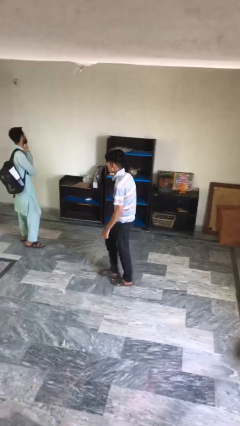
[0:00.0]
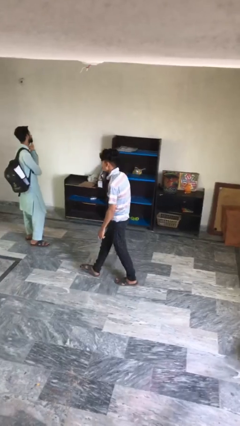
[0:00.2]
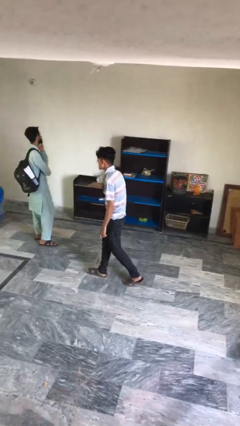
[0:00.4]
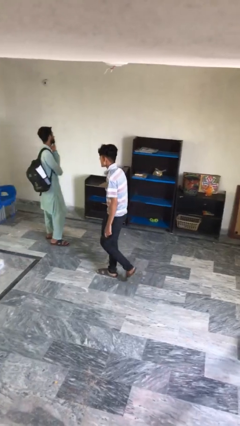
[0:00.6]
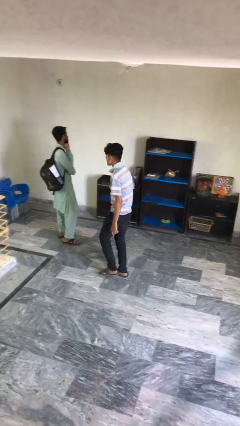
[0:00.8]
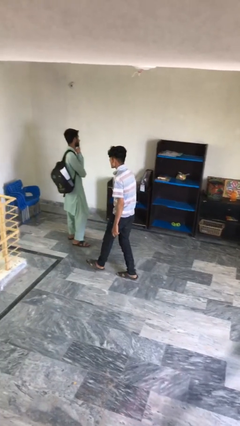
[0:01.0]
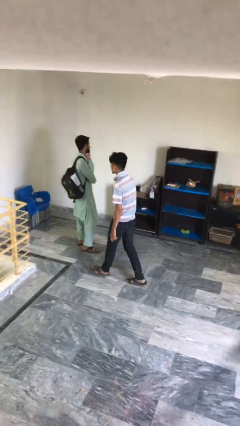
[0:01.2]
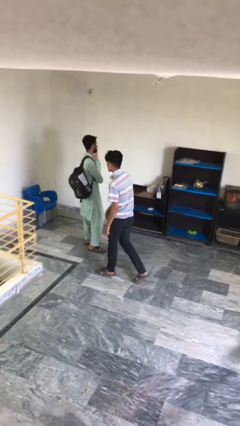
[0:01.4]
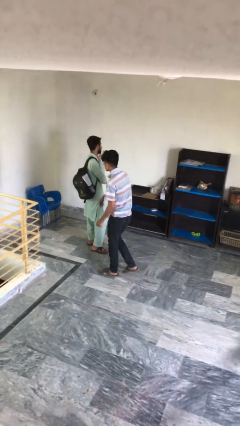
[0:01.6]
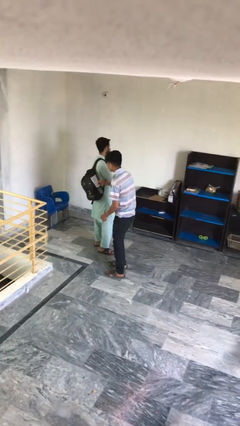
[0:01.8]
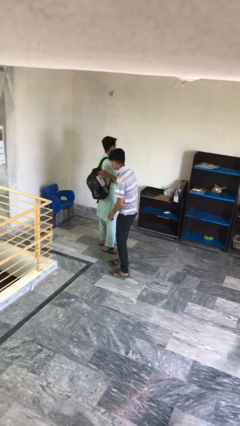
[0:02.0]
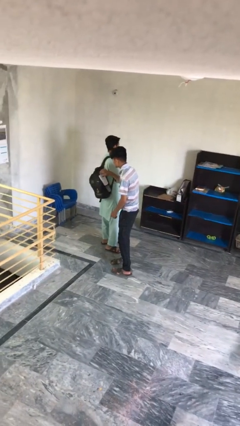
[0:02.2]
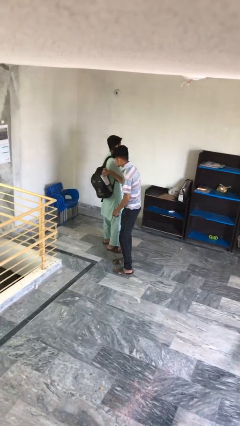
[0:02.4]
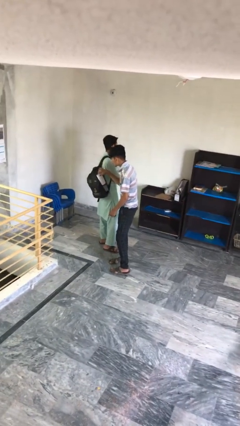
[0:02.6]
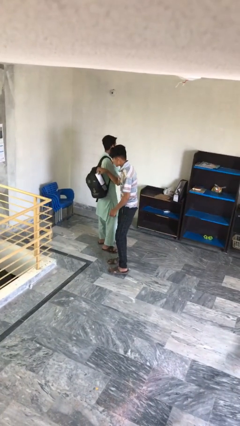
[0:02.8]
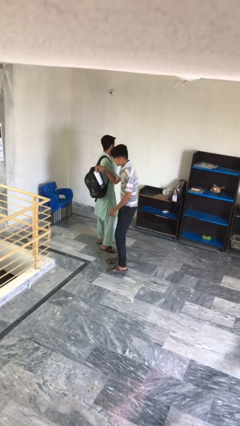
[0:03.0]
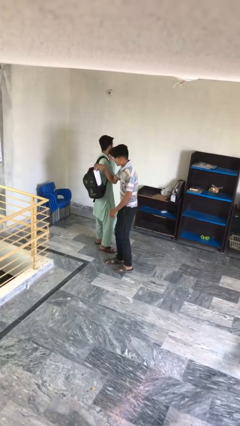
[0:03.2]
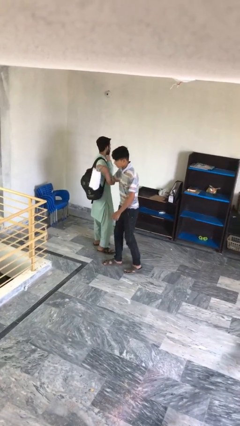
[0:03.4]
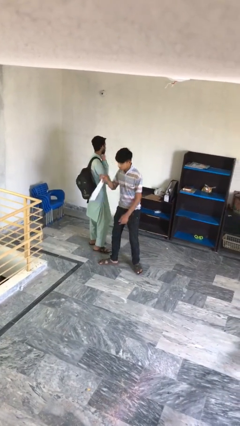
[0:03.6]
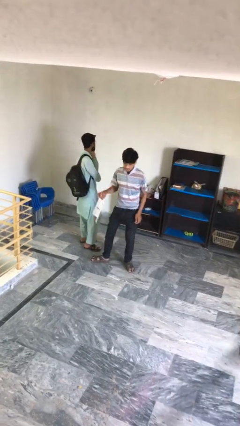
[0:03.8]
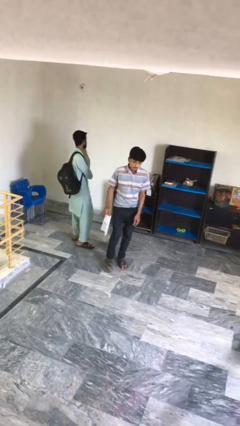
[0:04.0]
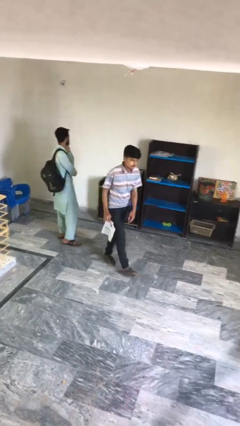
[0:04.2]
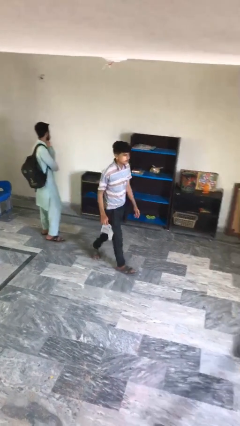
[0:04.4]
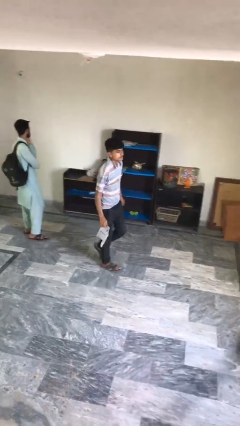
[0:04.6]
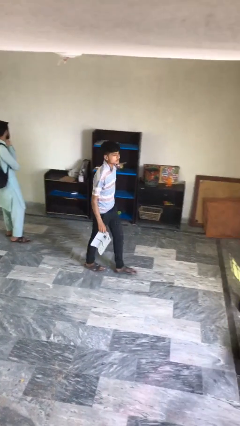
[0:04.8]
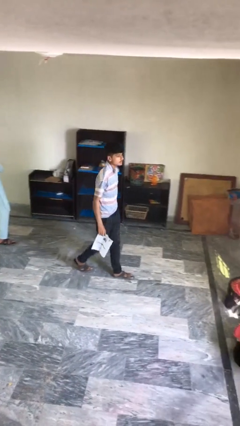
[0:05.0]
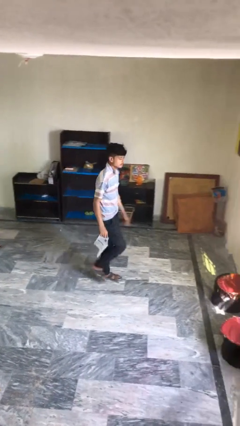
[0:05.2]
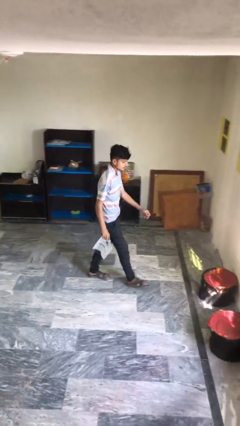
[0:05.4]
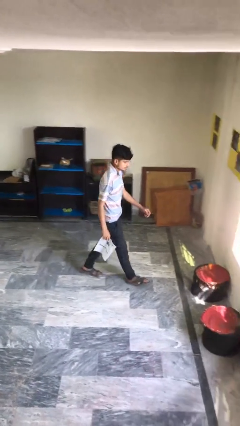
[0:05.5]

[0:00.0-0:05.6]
person steals object from person

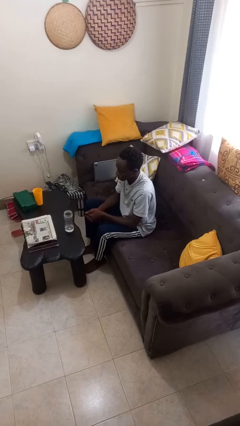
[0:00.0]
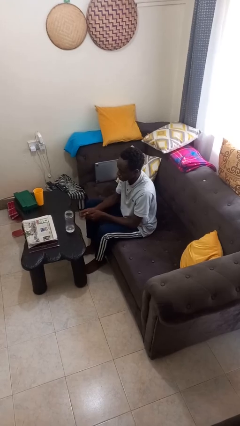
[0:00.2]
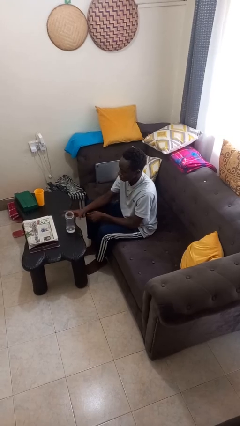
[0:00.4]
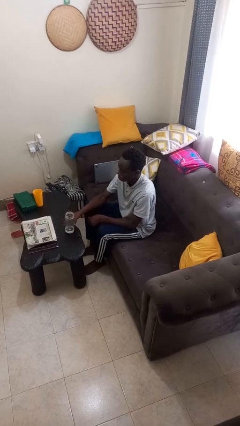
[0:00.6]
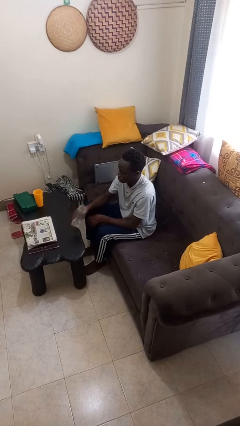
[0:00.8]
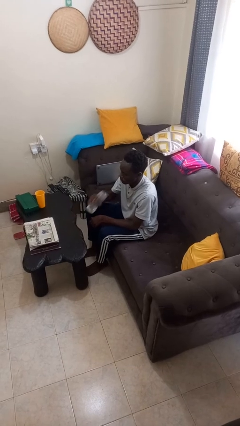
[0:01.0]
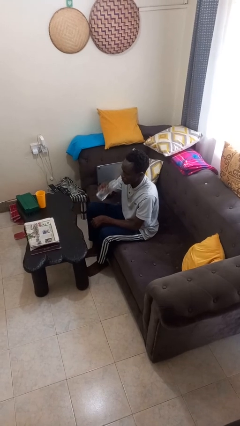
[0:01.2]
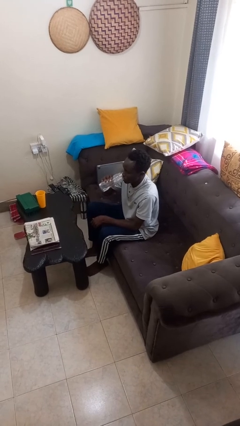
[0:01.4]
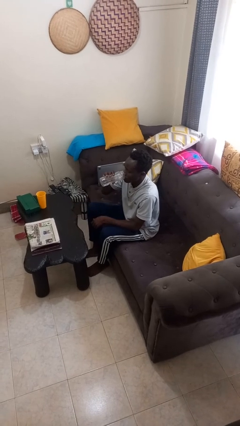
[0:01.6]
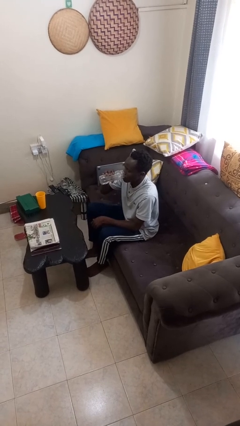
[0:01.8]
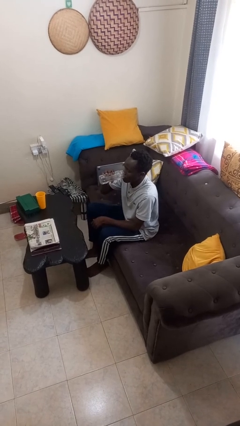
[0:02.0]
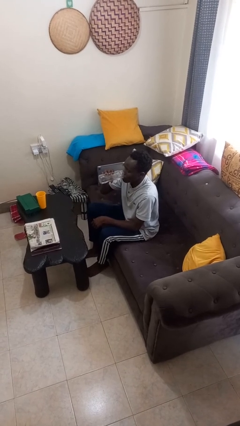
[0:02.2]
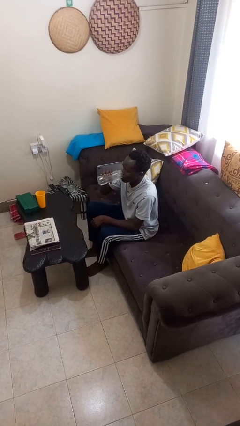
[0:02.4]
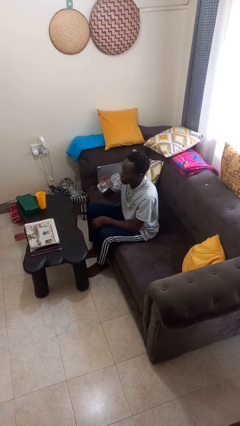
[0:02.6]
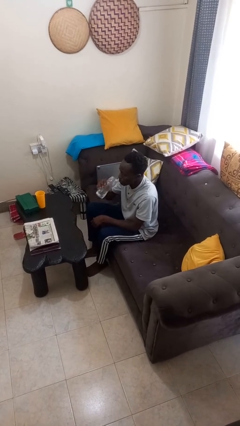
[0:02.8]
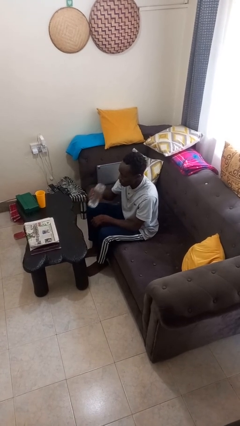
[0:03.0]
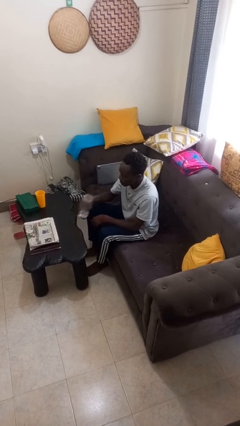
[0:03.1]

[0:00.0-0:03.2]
person drinks from bottle

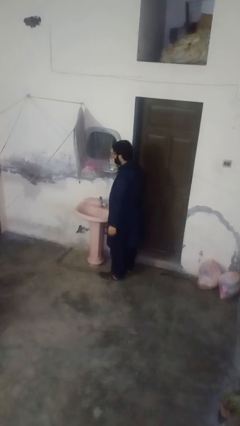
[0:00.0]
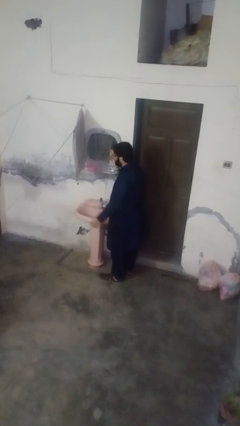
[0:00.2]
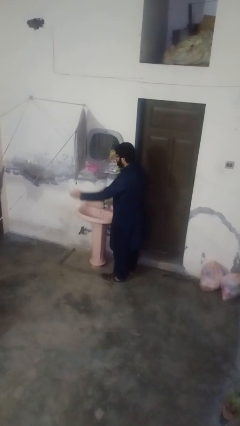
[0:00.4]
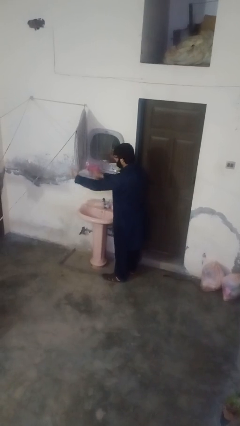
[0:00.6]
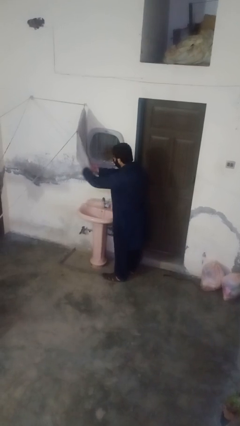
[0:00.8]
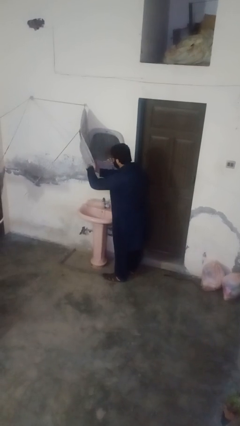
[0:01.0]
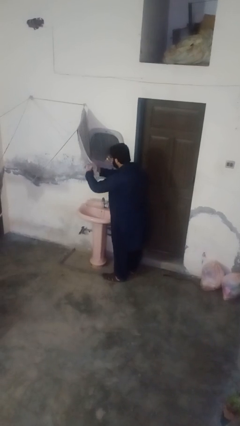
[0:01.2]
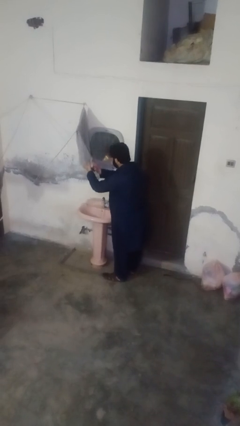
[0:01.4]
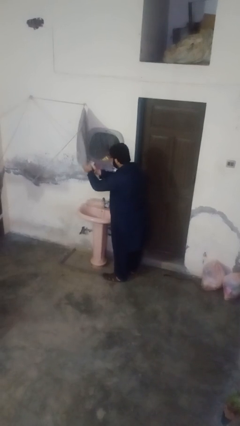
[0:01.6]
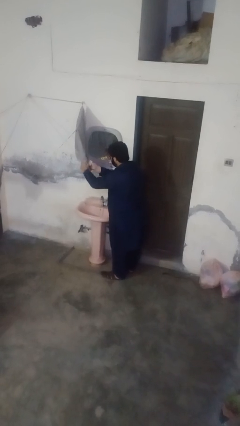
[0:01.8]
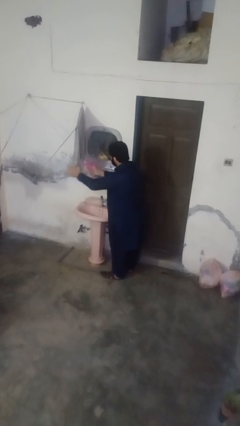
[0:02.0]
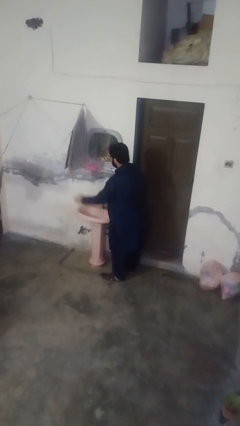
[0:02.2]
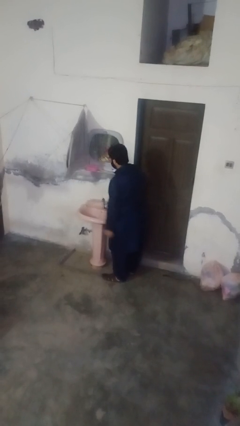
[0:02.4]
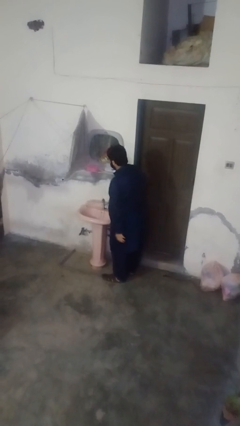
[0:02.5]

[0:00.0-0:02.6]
person dries hands with towel

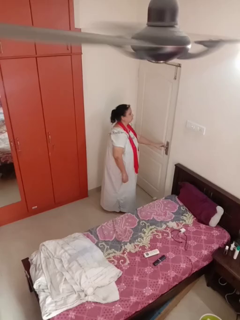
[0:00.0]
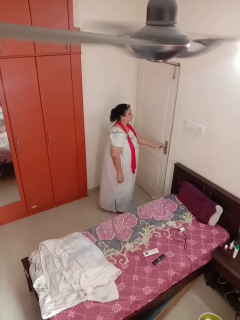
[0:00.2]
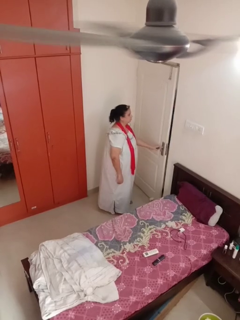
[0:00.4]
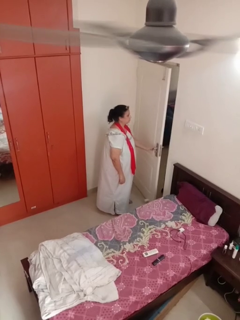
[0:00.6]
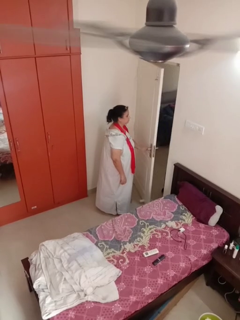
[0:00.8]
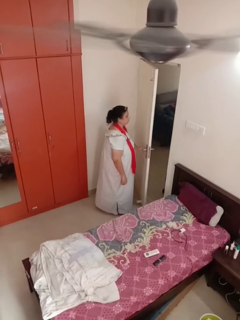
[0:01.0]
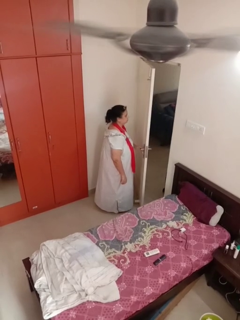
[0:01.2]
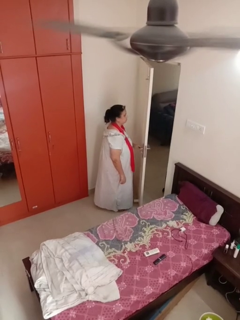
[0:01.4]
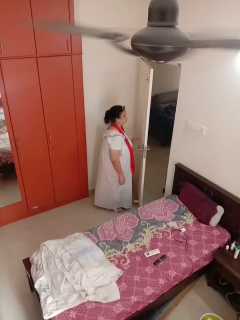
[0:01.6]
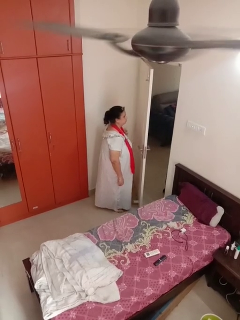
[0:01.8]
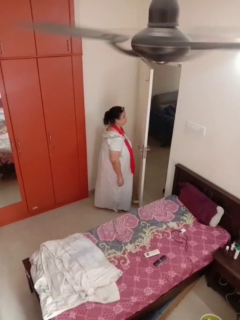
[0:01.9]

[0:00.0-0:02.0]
person opens facility door

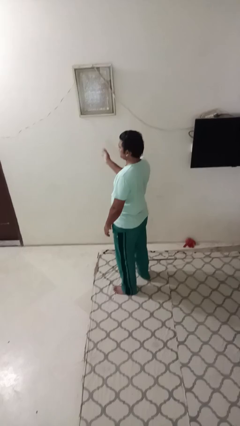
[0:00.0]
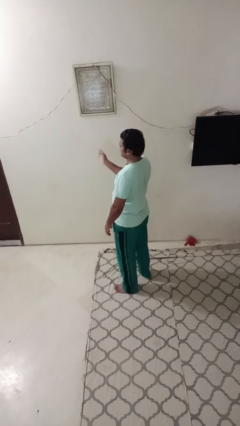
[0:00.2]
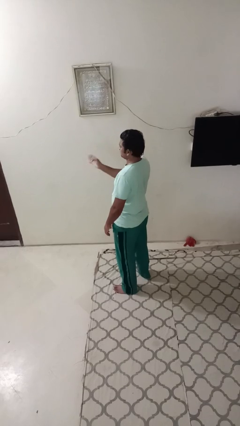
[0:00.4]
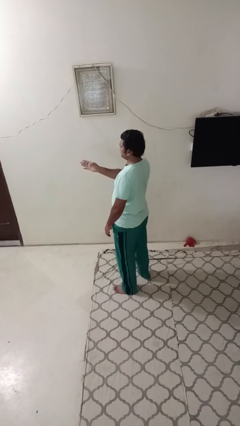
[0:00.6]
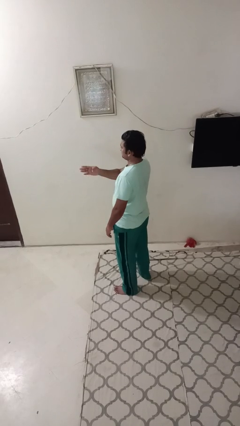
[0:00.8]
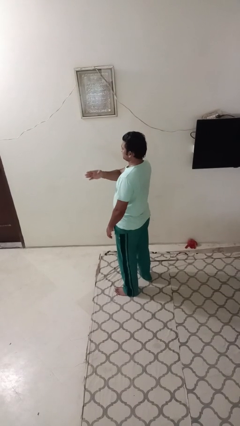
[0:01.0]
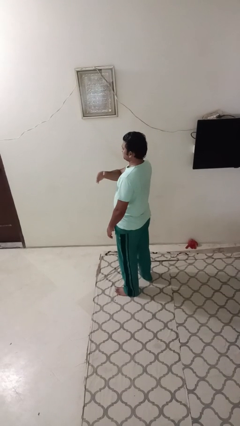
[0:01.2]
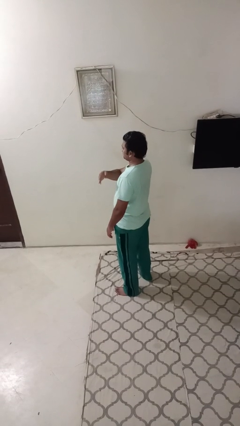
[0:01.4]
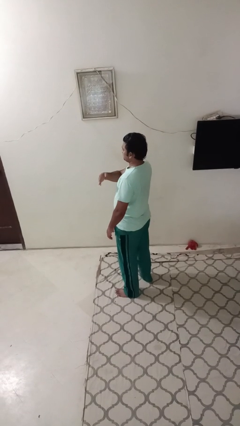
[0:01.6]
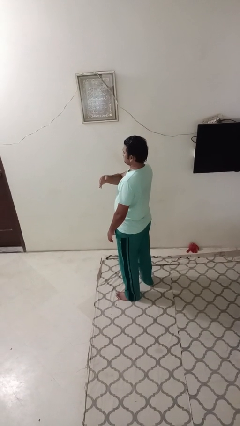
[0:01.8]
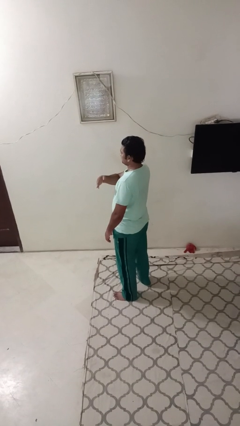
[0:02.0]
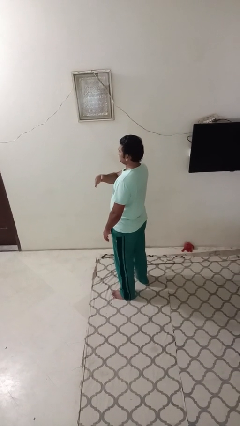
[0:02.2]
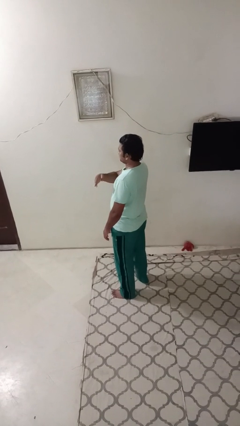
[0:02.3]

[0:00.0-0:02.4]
person gestures swipe left

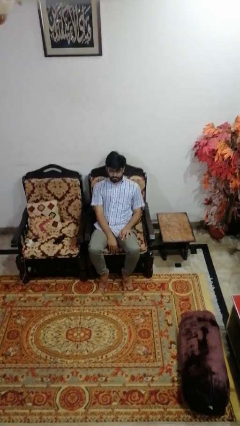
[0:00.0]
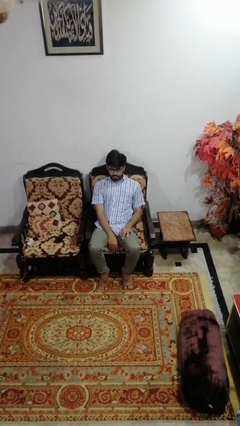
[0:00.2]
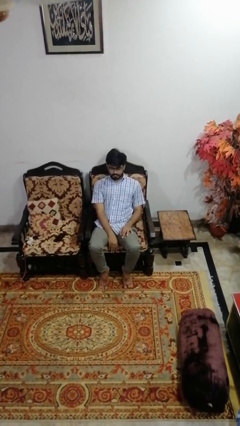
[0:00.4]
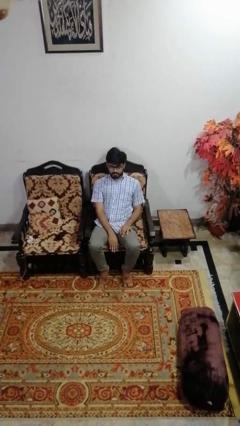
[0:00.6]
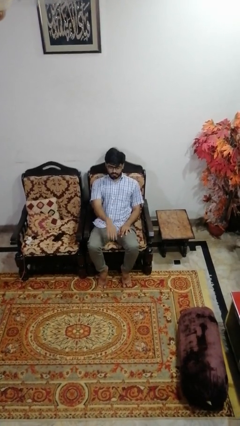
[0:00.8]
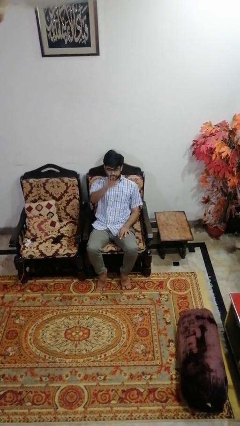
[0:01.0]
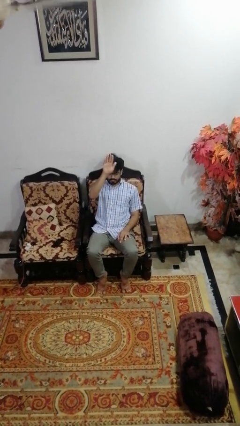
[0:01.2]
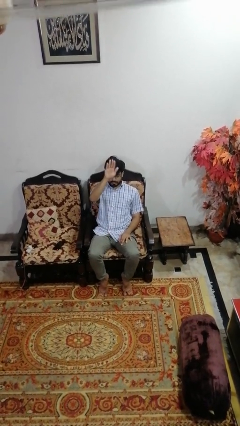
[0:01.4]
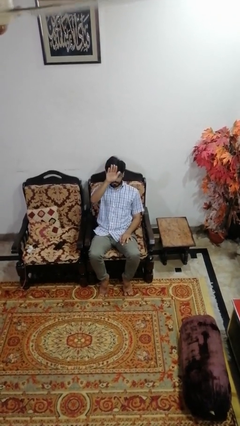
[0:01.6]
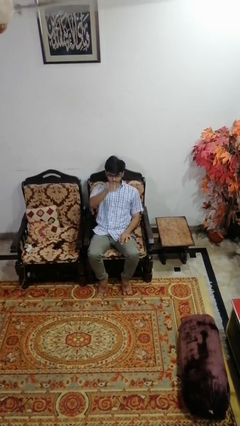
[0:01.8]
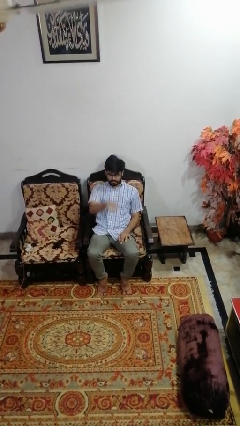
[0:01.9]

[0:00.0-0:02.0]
person gestures swipe up
